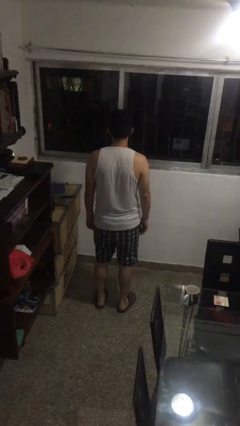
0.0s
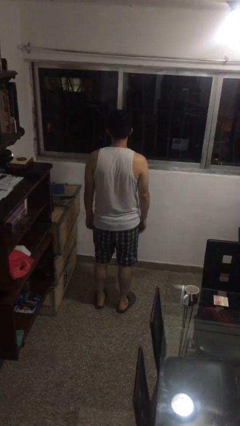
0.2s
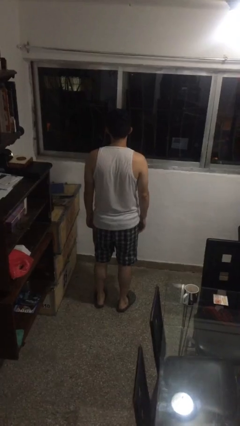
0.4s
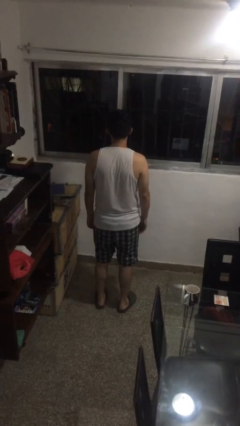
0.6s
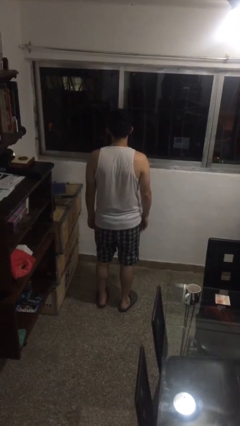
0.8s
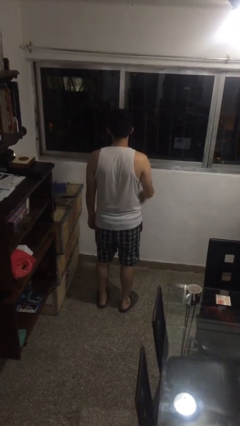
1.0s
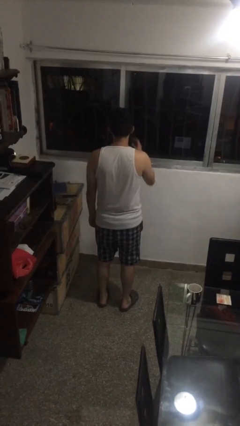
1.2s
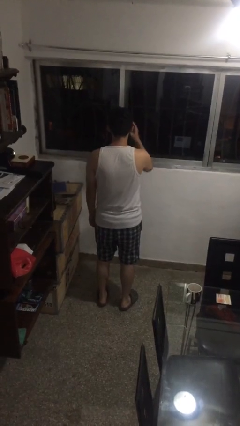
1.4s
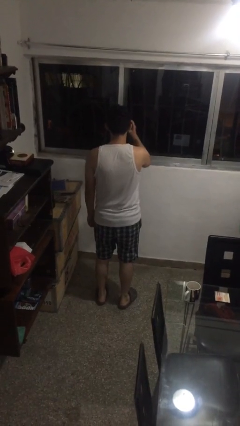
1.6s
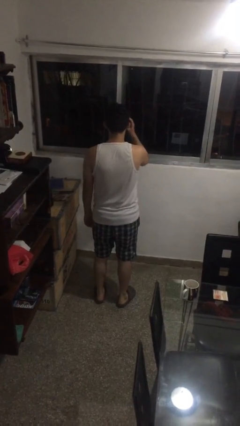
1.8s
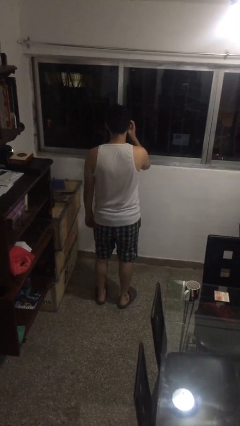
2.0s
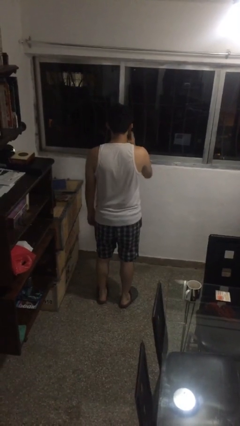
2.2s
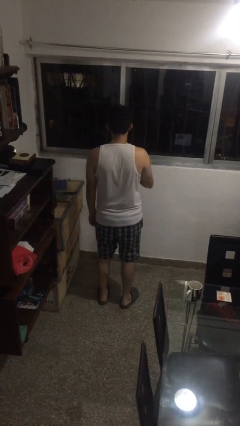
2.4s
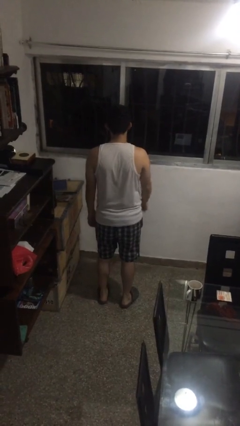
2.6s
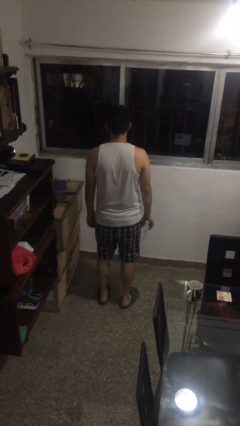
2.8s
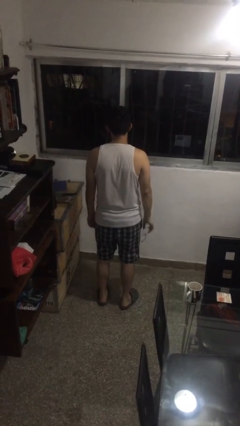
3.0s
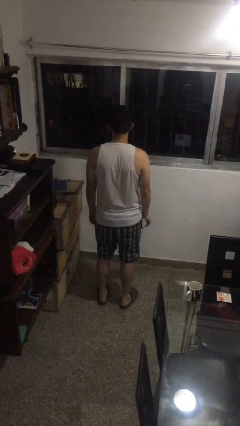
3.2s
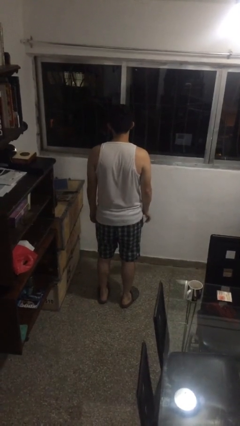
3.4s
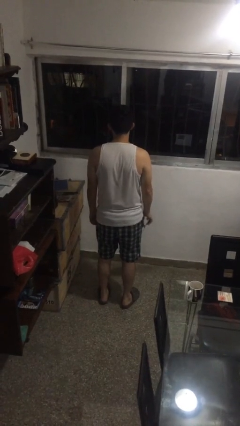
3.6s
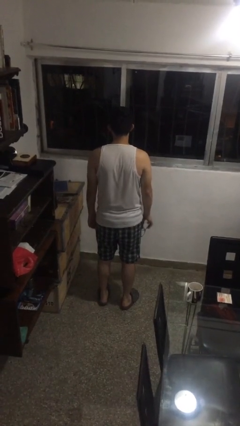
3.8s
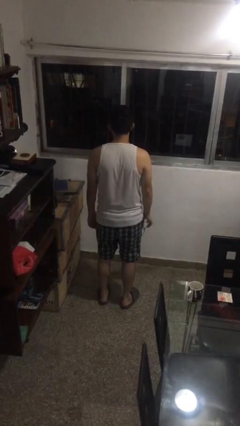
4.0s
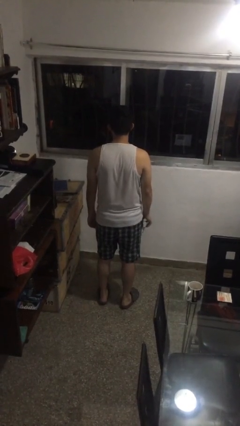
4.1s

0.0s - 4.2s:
person takes off glasses

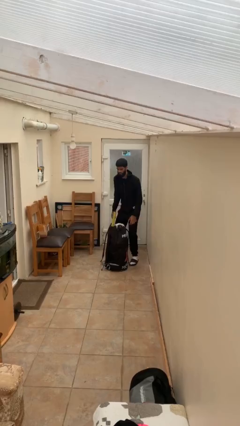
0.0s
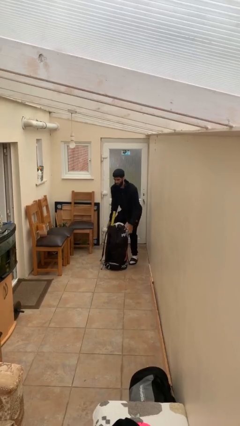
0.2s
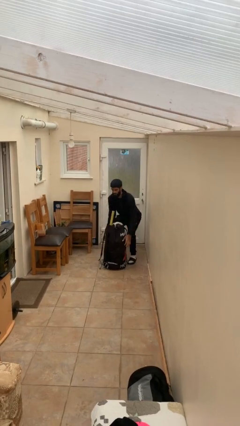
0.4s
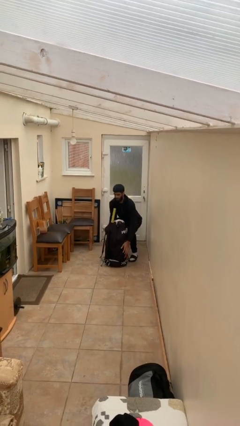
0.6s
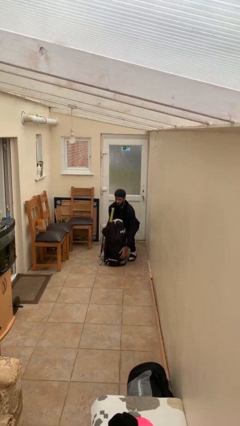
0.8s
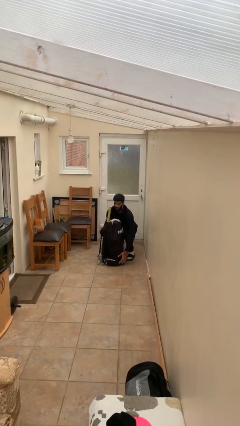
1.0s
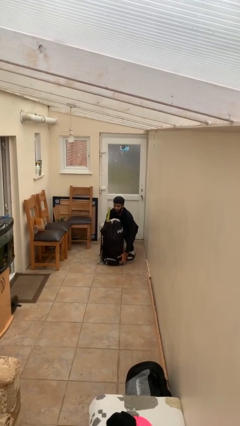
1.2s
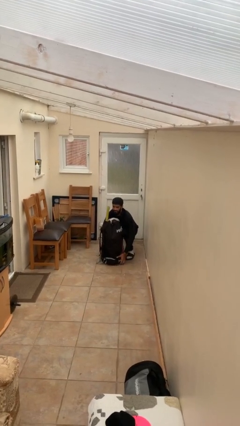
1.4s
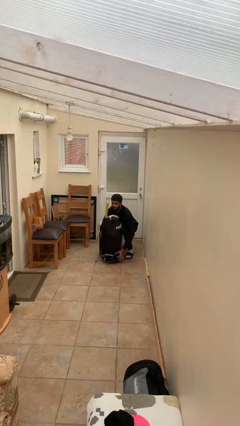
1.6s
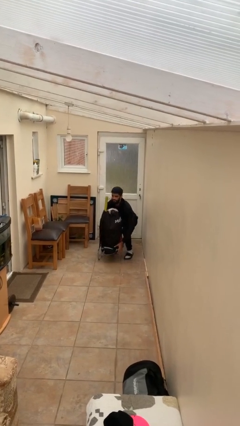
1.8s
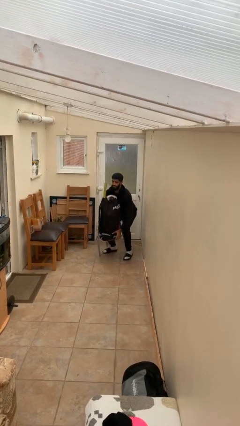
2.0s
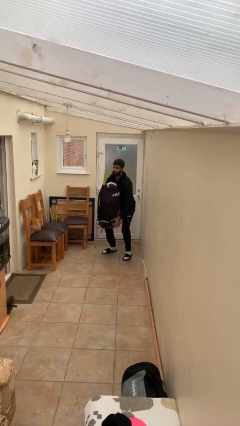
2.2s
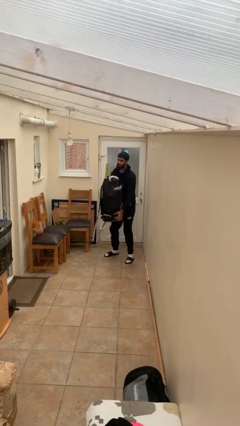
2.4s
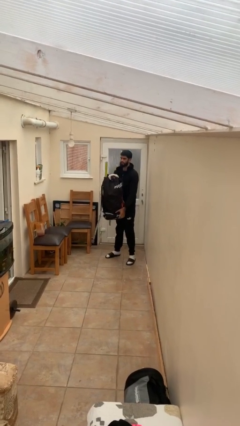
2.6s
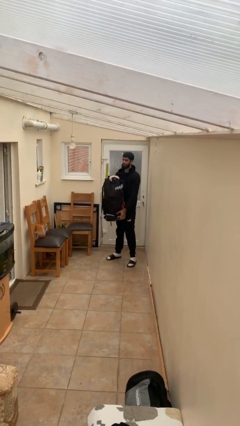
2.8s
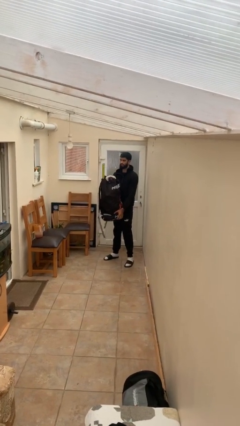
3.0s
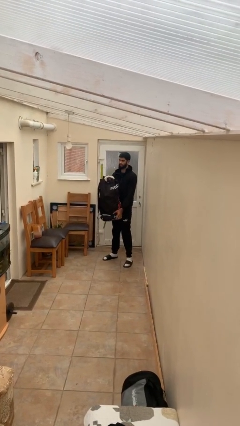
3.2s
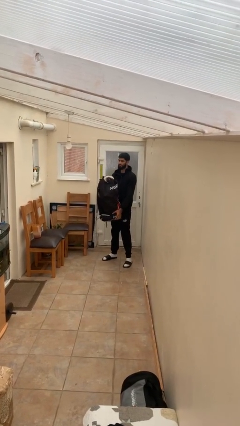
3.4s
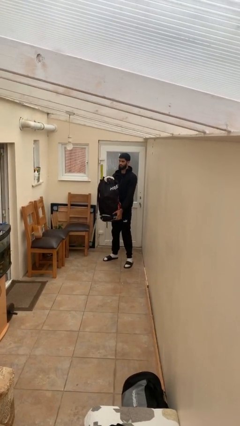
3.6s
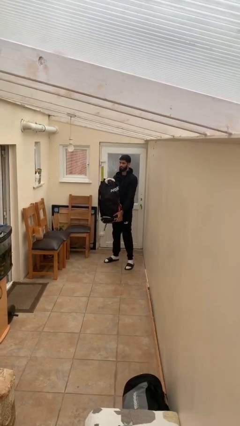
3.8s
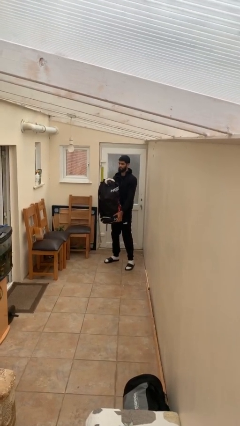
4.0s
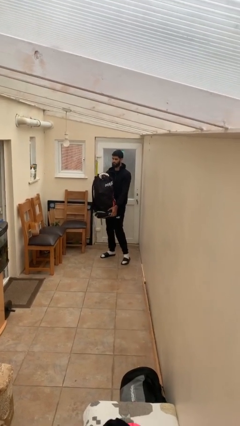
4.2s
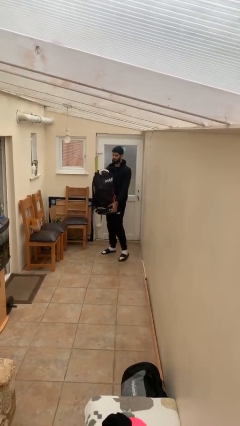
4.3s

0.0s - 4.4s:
person picks up object from floor

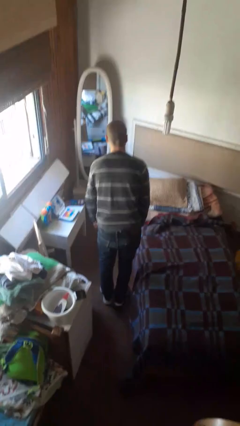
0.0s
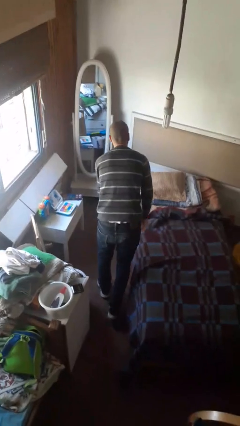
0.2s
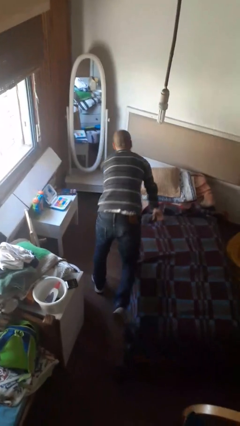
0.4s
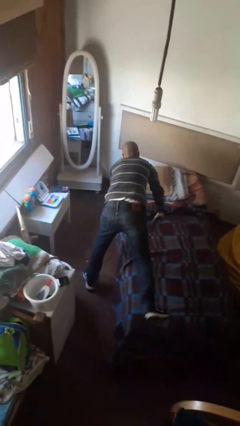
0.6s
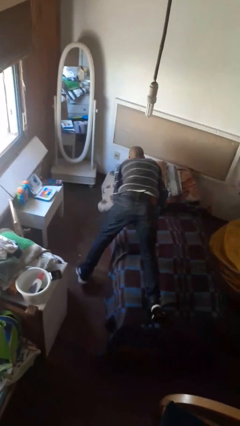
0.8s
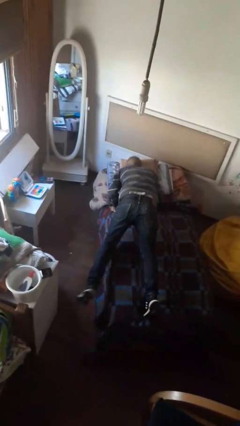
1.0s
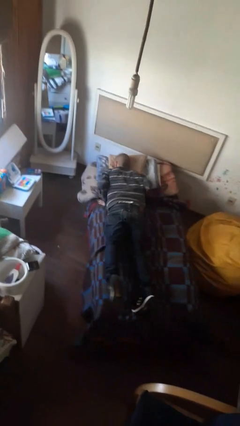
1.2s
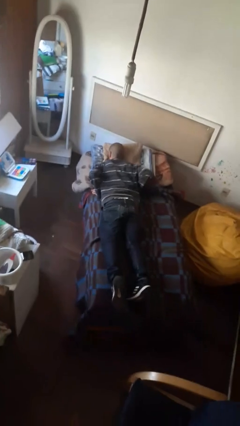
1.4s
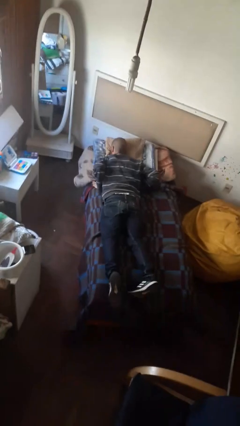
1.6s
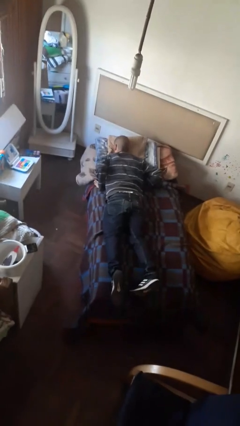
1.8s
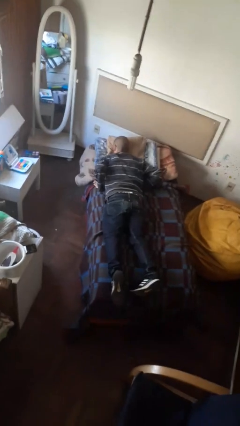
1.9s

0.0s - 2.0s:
person lies down on bed

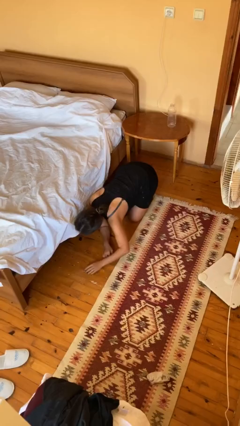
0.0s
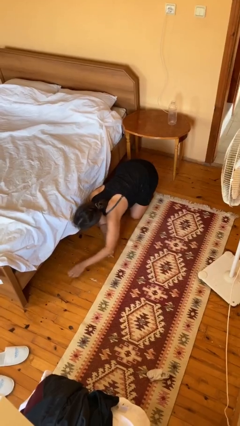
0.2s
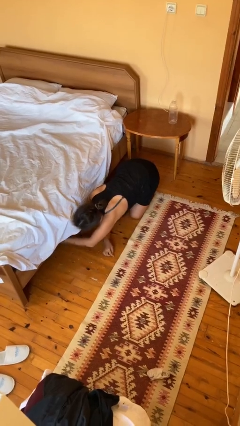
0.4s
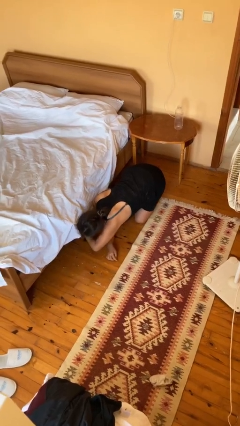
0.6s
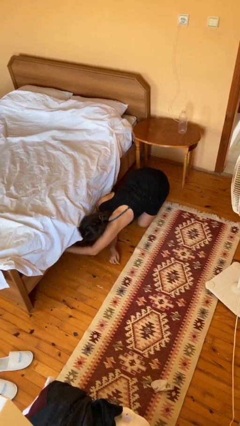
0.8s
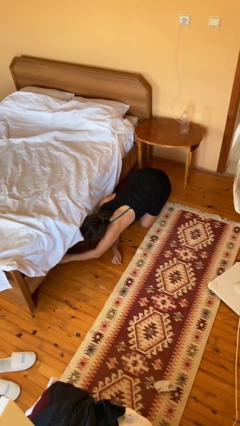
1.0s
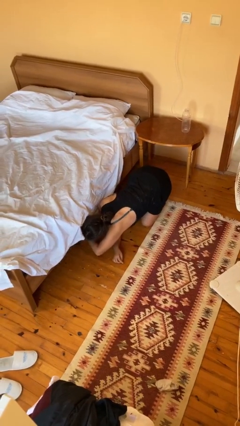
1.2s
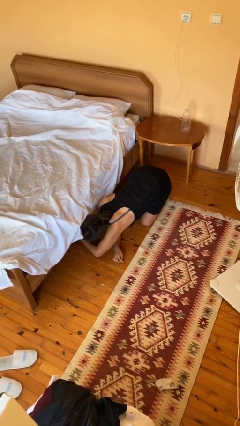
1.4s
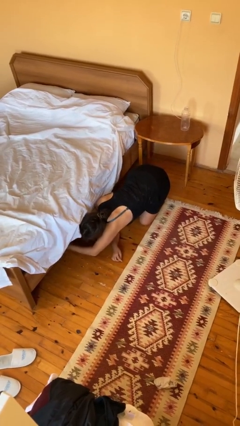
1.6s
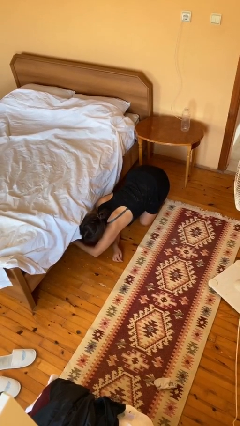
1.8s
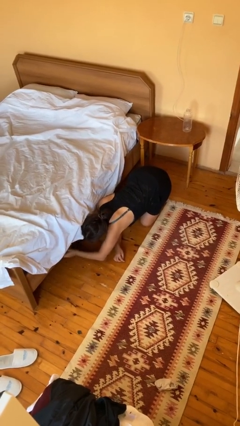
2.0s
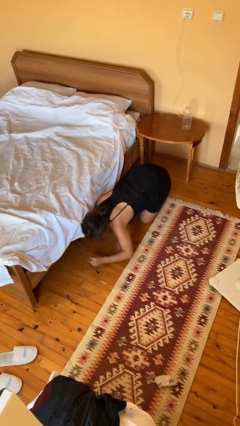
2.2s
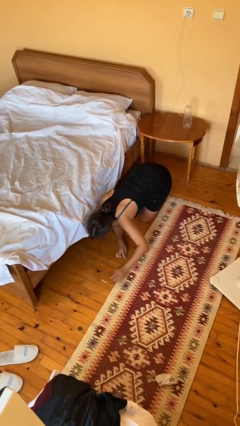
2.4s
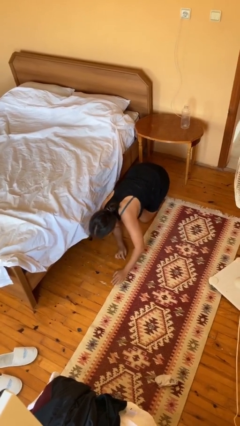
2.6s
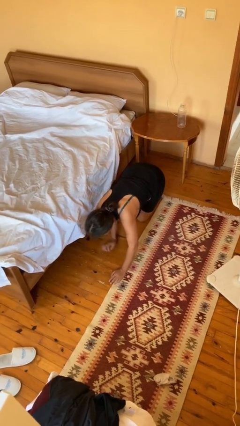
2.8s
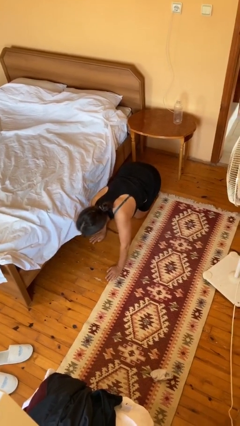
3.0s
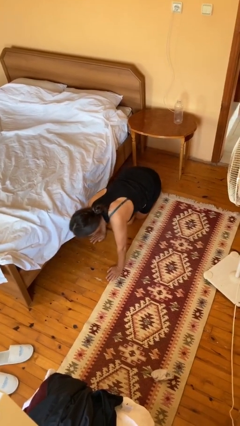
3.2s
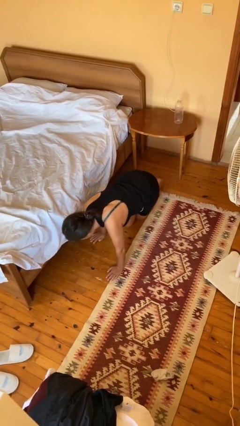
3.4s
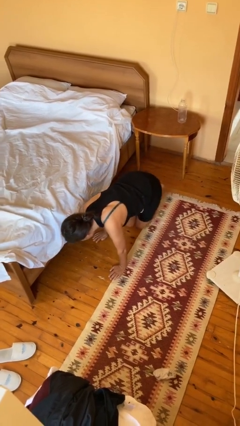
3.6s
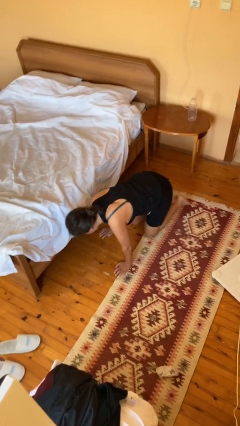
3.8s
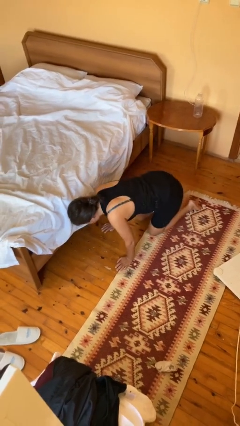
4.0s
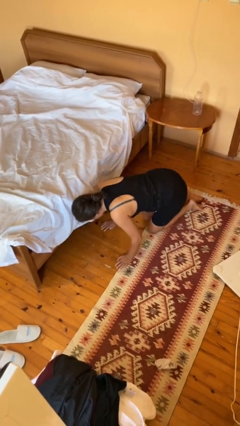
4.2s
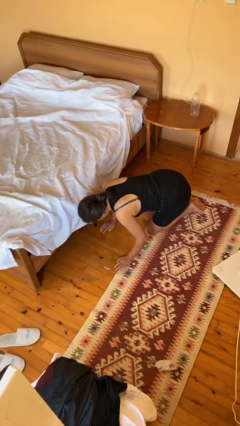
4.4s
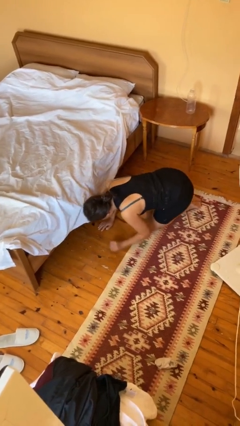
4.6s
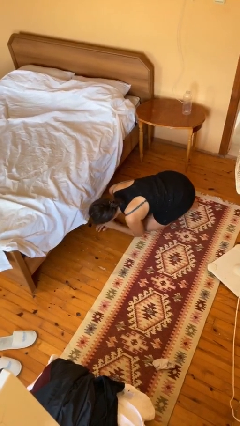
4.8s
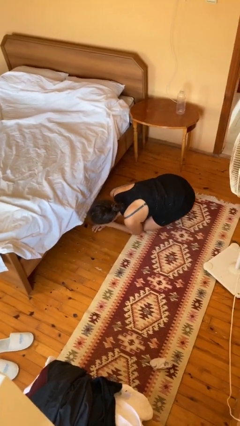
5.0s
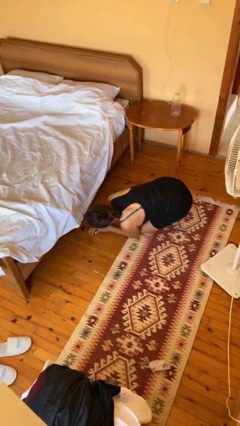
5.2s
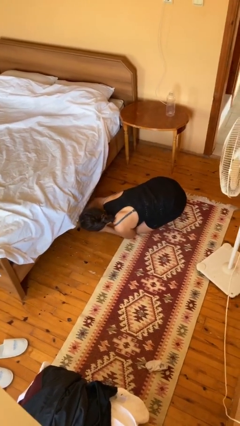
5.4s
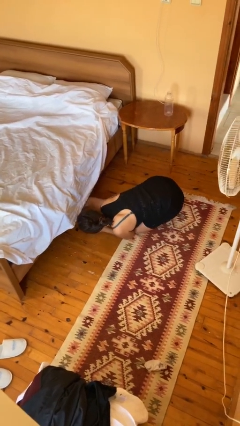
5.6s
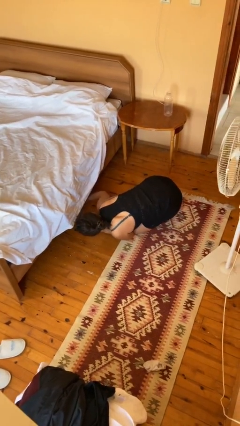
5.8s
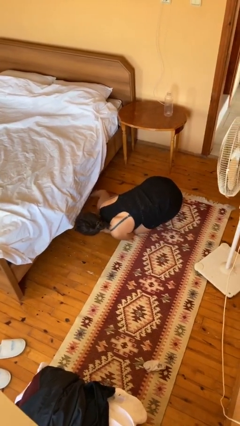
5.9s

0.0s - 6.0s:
person searches under bed

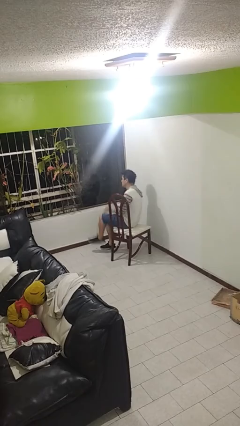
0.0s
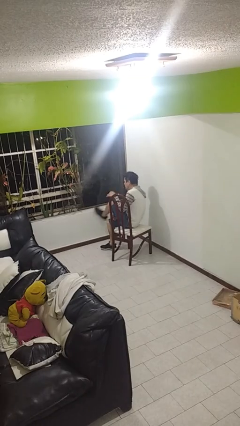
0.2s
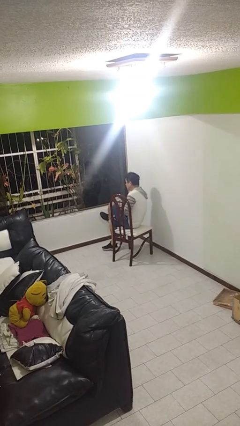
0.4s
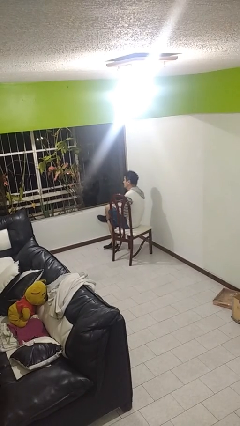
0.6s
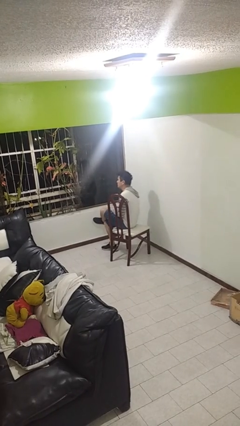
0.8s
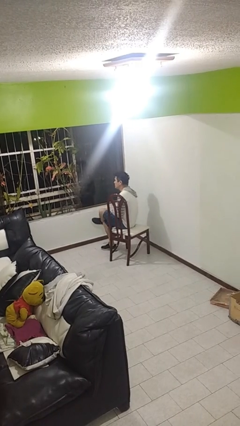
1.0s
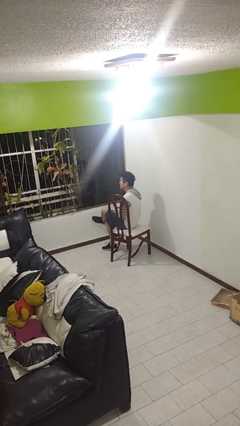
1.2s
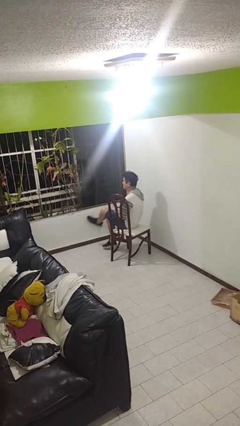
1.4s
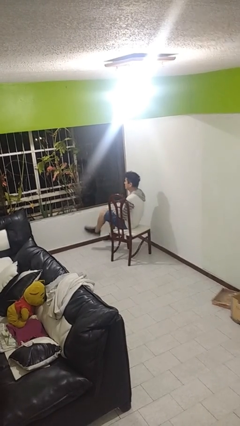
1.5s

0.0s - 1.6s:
person crosses legs
